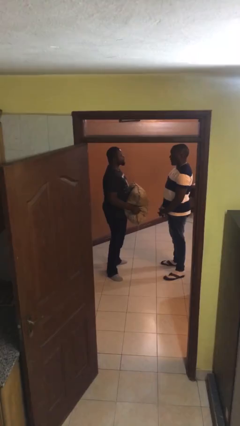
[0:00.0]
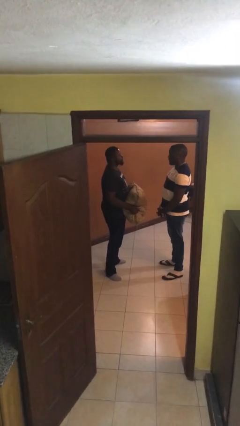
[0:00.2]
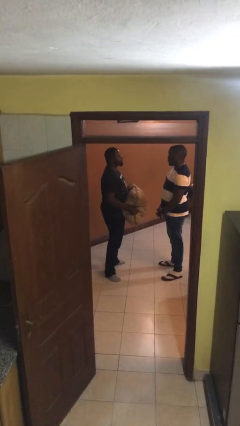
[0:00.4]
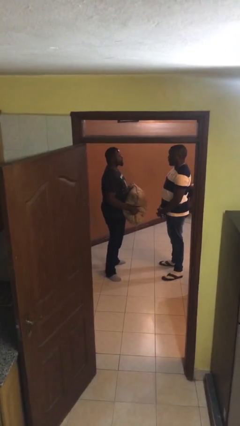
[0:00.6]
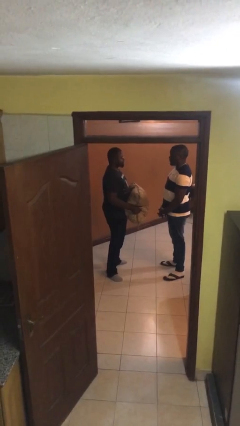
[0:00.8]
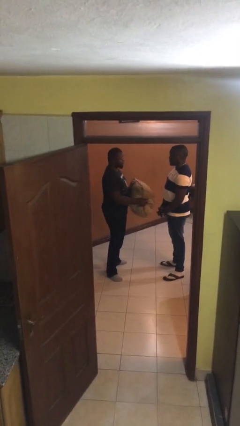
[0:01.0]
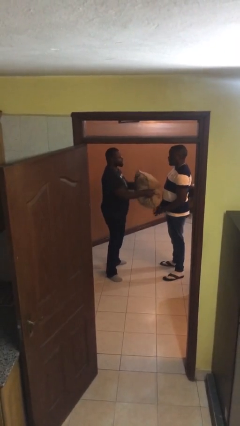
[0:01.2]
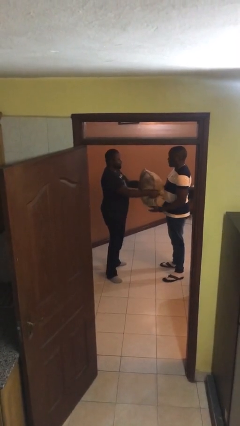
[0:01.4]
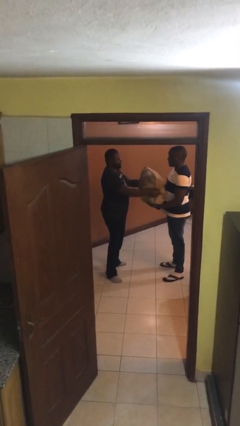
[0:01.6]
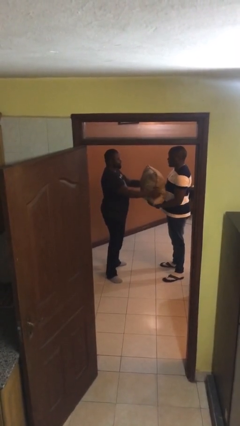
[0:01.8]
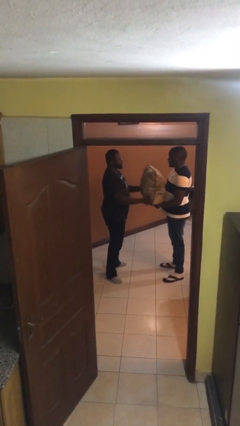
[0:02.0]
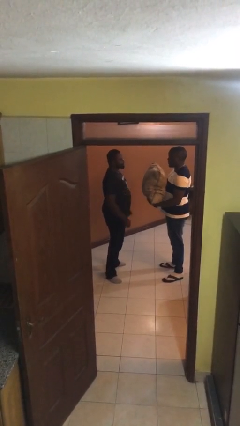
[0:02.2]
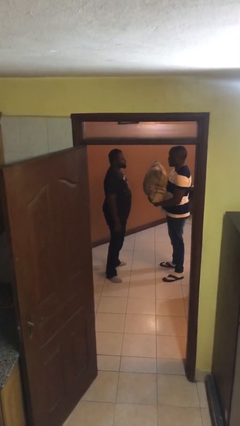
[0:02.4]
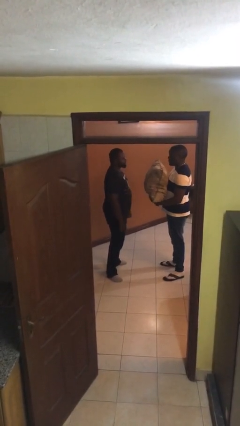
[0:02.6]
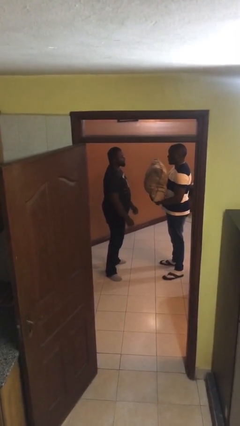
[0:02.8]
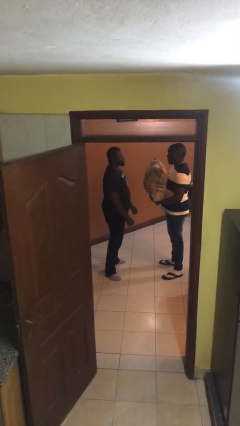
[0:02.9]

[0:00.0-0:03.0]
person transfers object to person

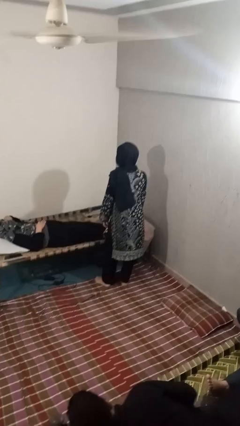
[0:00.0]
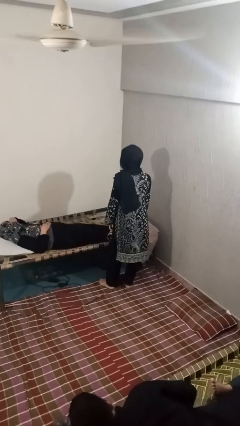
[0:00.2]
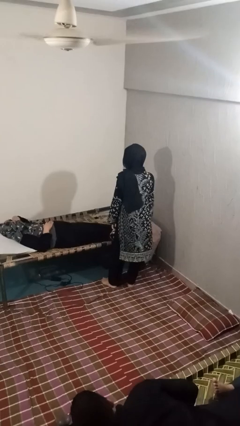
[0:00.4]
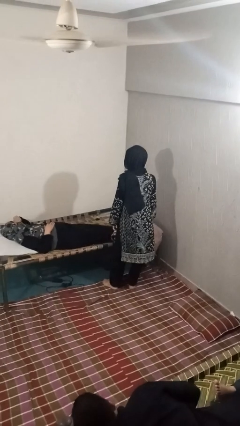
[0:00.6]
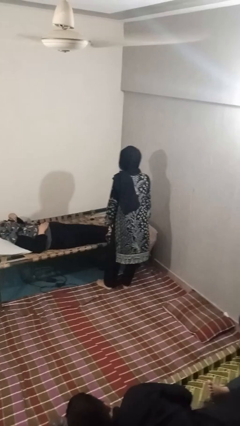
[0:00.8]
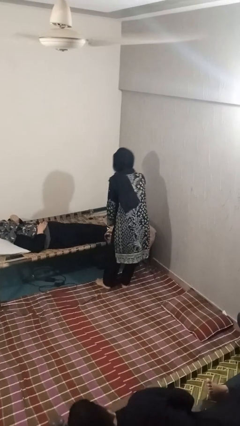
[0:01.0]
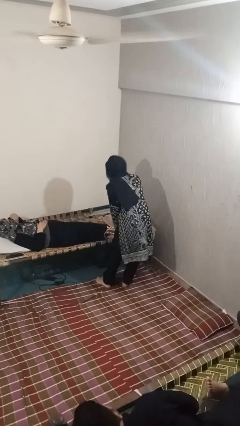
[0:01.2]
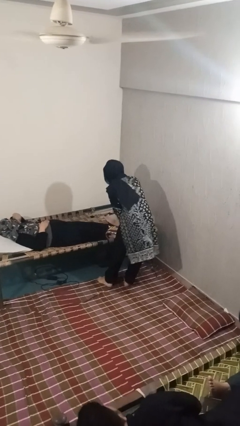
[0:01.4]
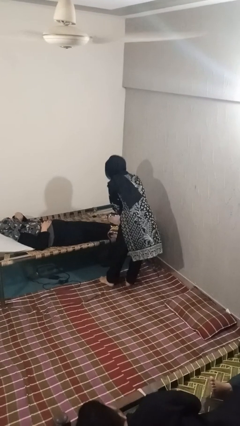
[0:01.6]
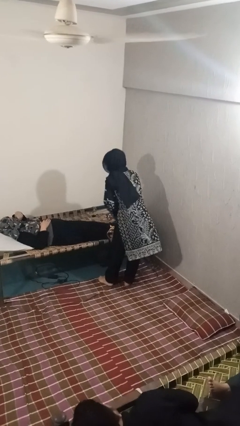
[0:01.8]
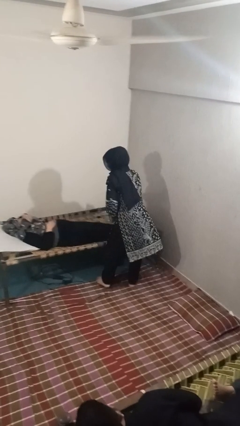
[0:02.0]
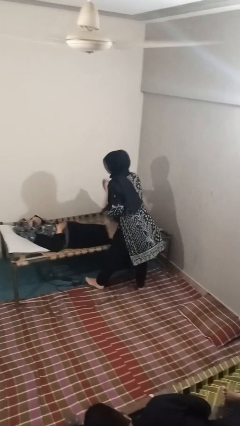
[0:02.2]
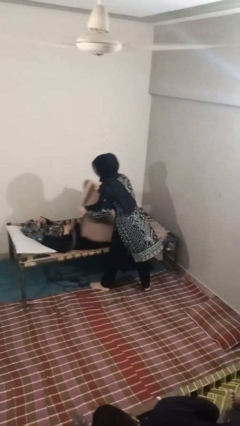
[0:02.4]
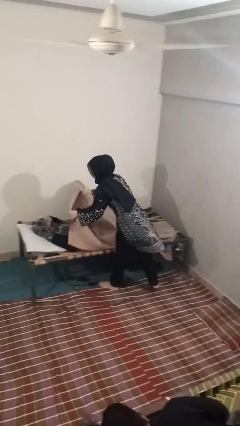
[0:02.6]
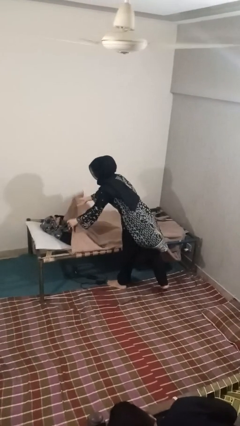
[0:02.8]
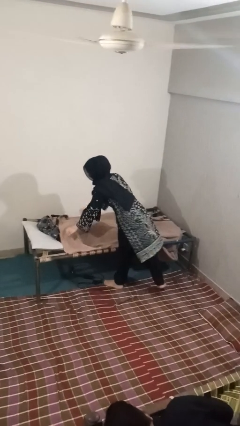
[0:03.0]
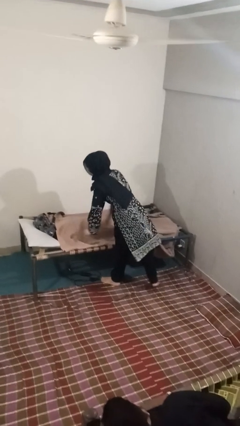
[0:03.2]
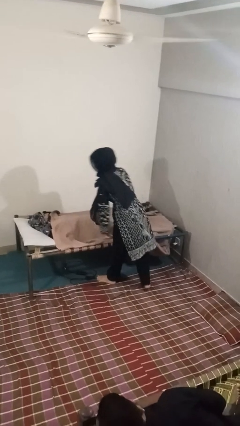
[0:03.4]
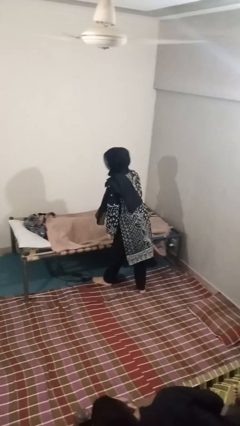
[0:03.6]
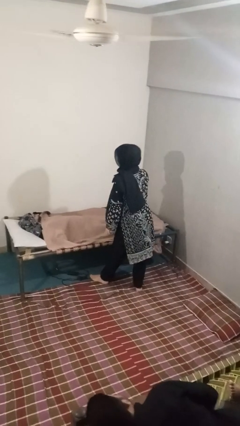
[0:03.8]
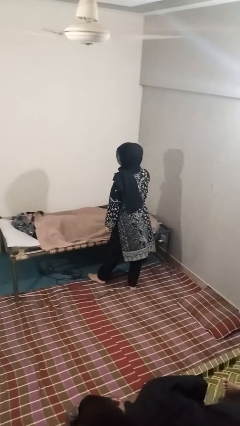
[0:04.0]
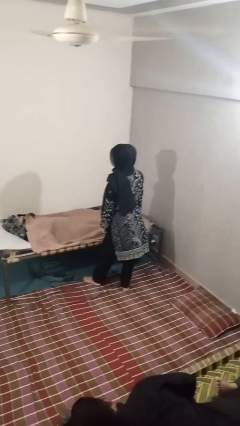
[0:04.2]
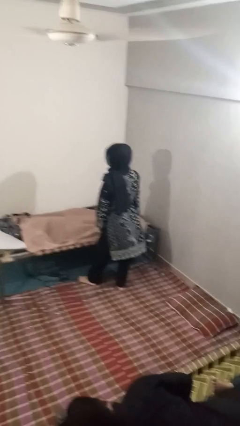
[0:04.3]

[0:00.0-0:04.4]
person covers friend with blanket

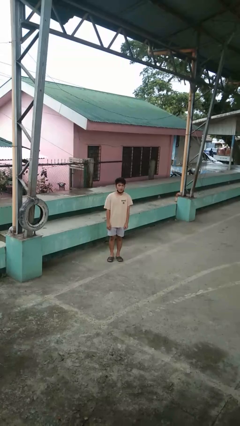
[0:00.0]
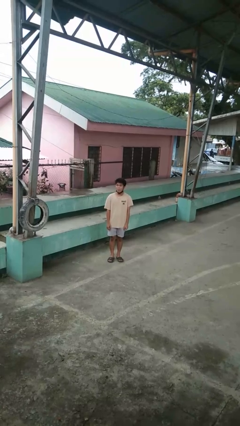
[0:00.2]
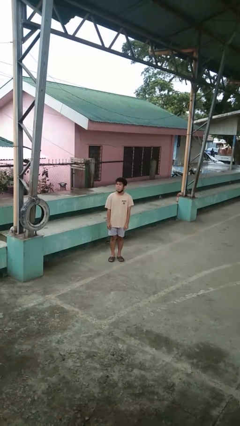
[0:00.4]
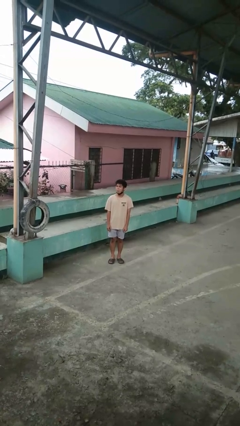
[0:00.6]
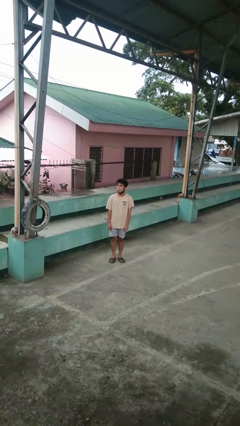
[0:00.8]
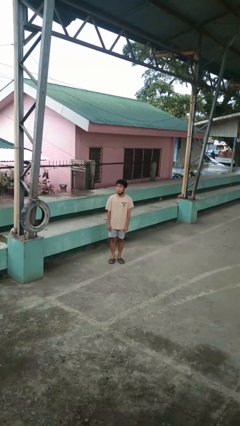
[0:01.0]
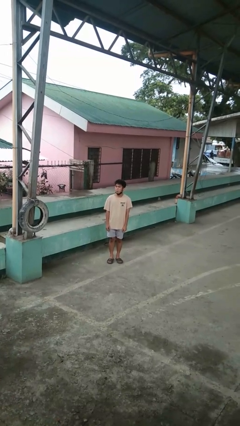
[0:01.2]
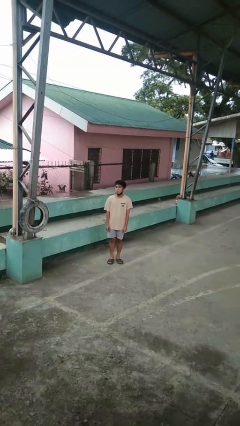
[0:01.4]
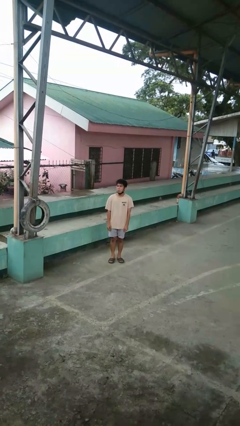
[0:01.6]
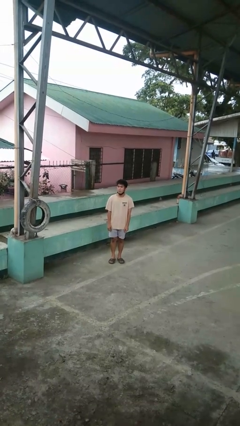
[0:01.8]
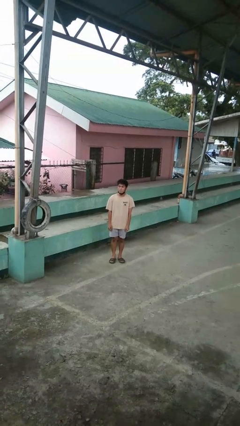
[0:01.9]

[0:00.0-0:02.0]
person sticks out tongue

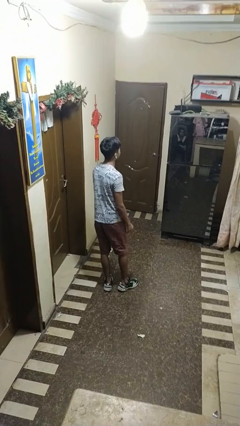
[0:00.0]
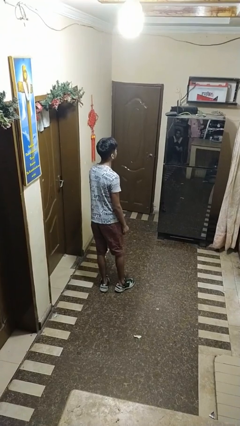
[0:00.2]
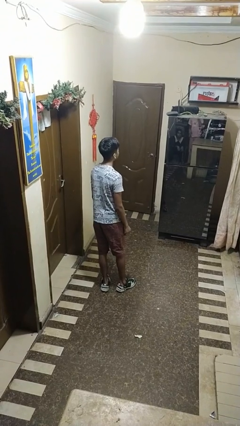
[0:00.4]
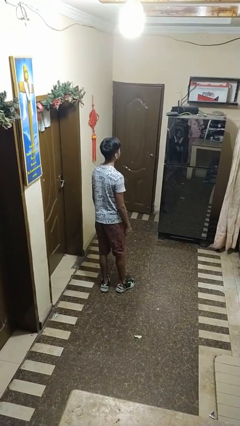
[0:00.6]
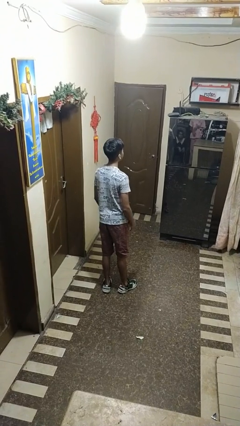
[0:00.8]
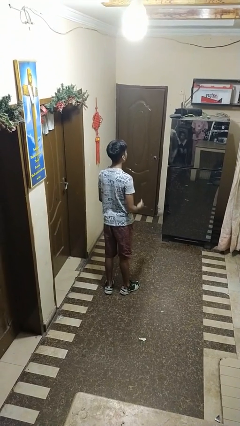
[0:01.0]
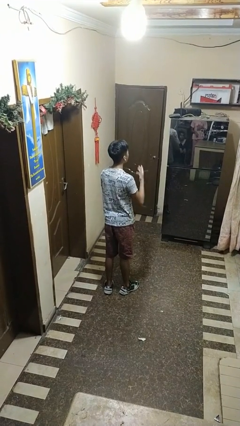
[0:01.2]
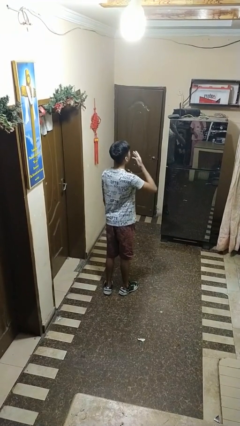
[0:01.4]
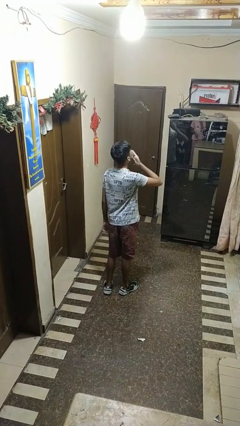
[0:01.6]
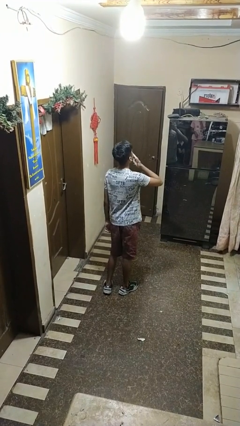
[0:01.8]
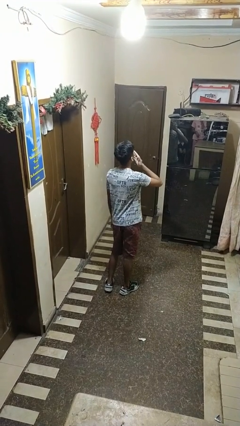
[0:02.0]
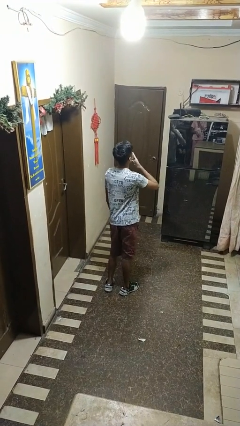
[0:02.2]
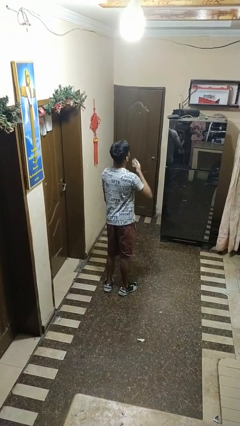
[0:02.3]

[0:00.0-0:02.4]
person yawns

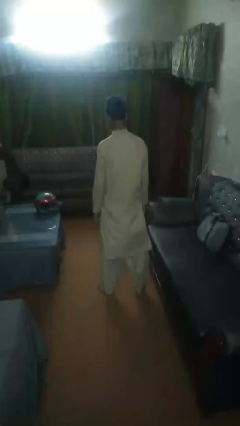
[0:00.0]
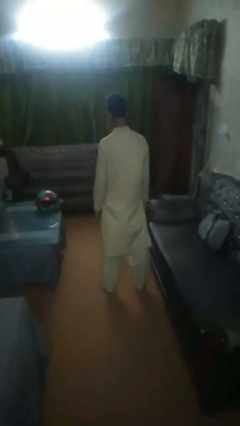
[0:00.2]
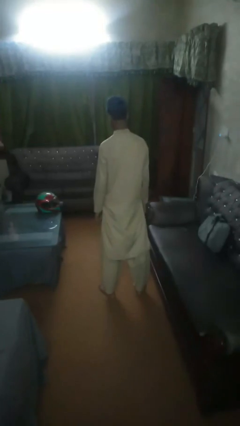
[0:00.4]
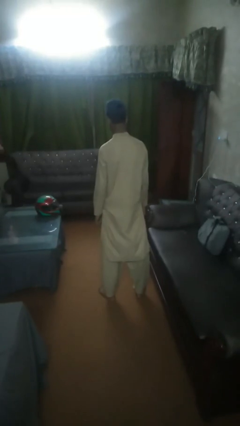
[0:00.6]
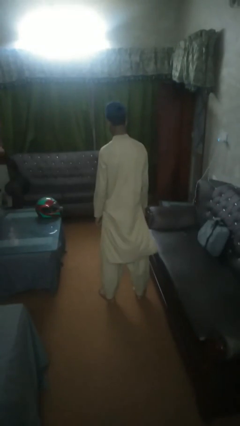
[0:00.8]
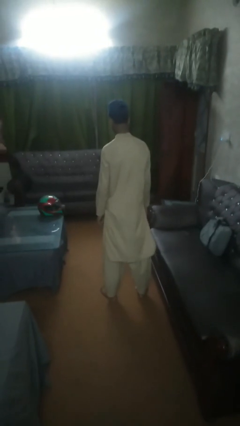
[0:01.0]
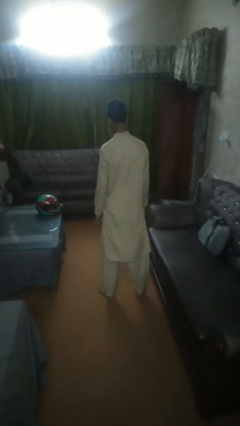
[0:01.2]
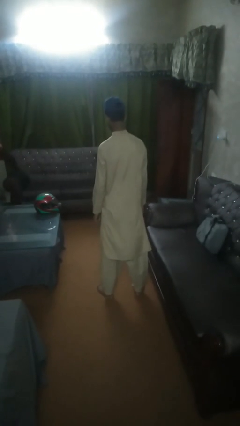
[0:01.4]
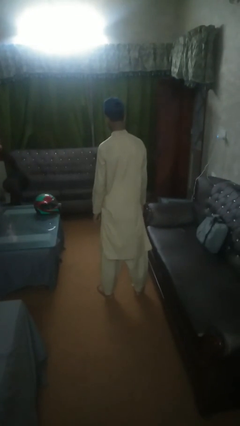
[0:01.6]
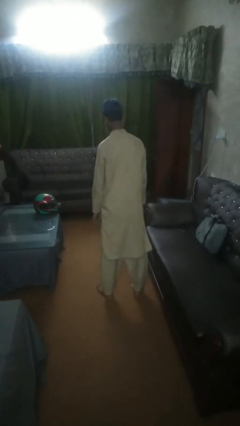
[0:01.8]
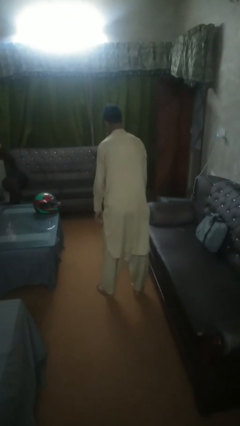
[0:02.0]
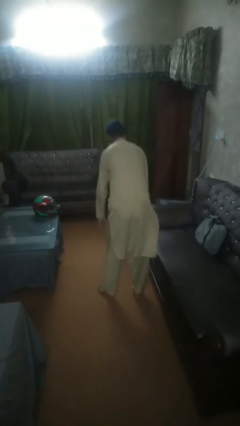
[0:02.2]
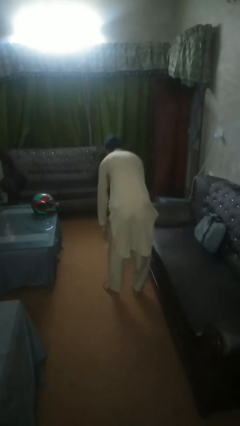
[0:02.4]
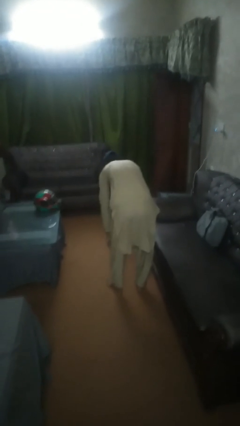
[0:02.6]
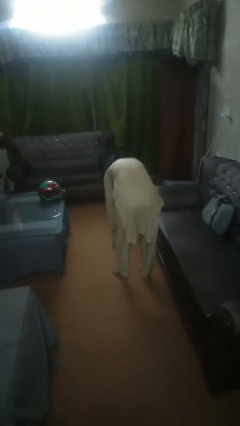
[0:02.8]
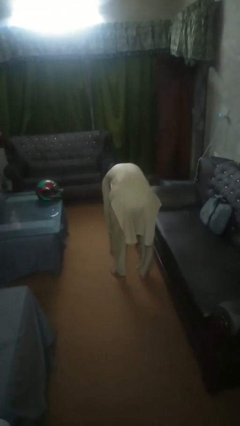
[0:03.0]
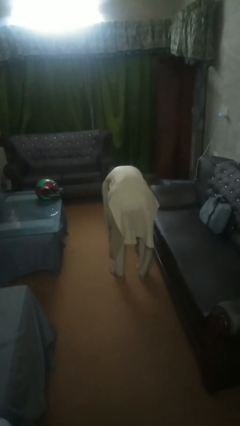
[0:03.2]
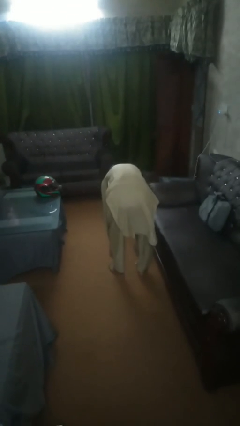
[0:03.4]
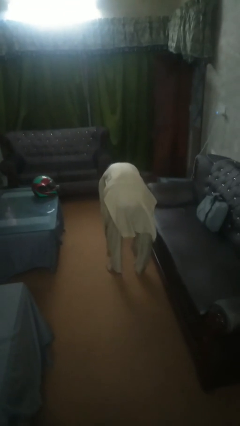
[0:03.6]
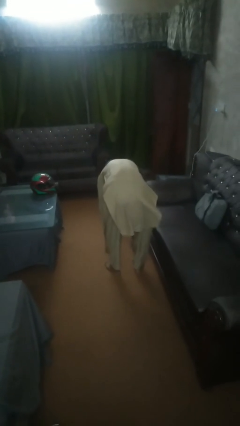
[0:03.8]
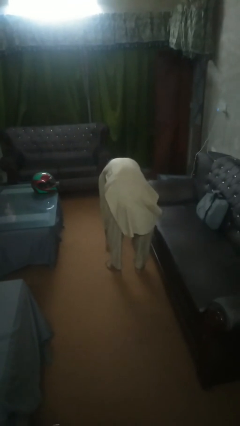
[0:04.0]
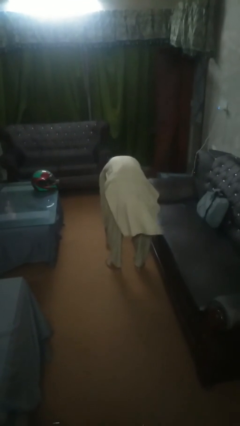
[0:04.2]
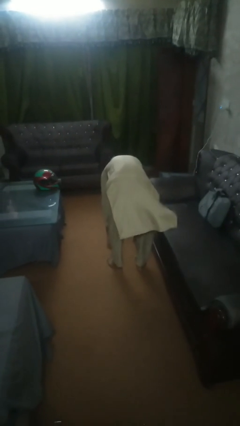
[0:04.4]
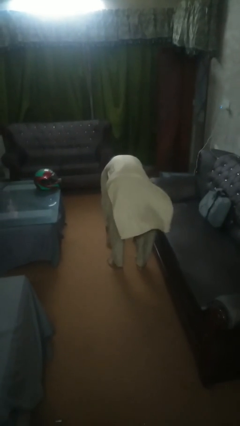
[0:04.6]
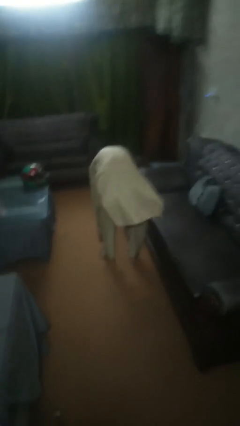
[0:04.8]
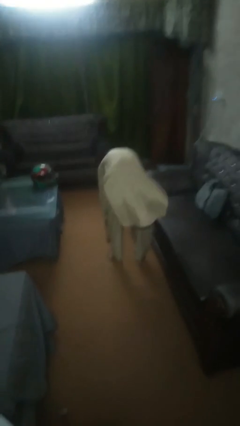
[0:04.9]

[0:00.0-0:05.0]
person exercises with plank

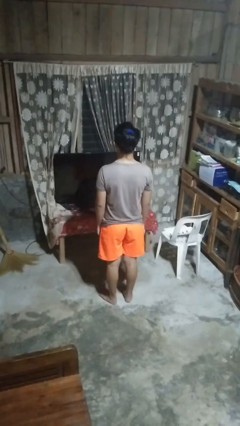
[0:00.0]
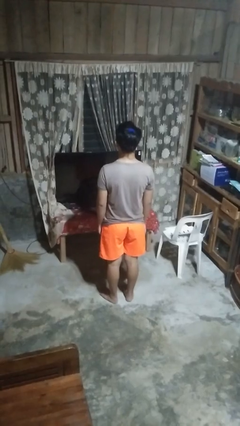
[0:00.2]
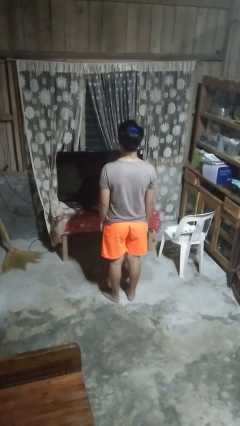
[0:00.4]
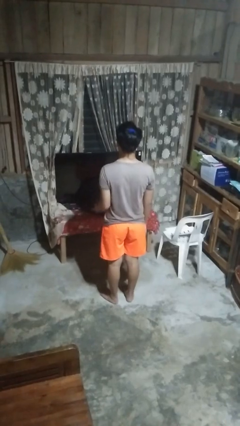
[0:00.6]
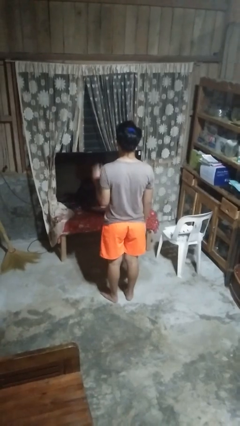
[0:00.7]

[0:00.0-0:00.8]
person gestures number five
